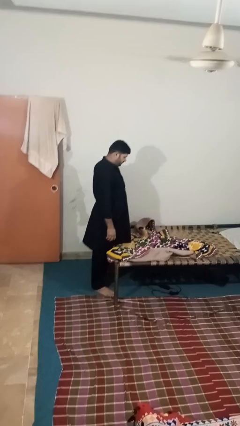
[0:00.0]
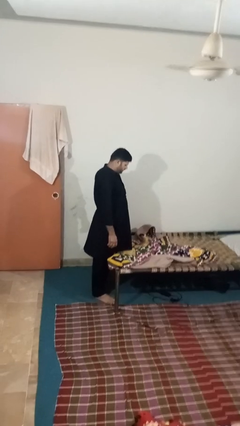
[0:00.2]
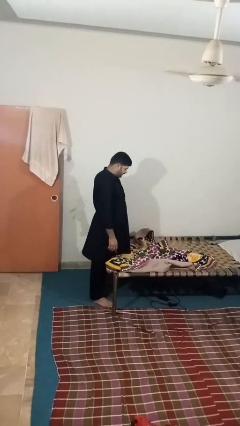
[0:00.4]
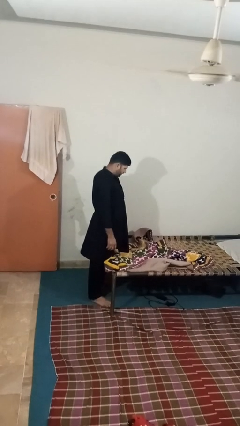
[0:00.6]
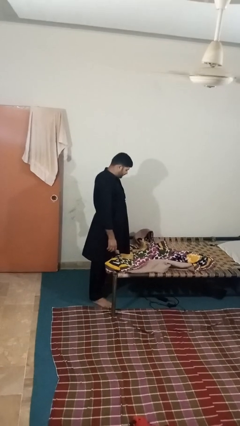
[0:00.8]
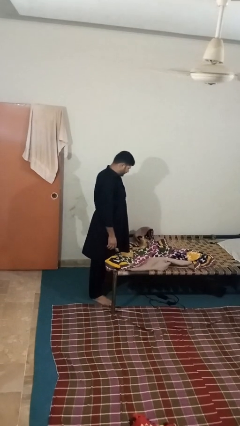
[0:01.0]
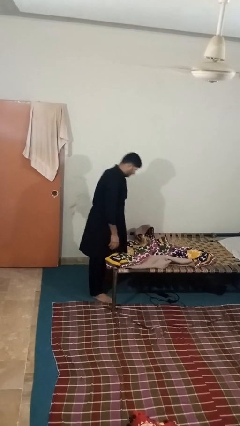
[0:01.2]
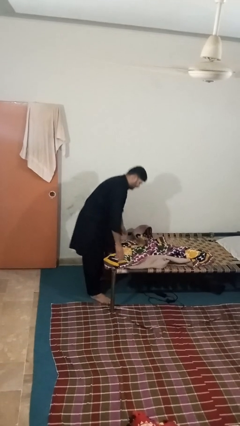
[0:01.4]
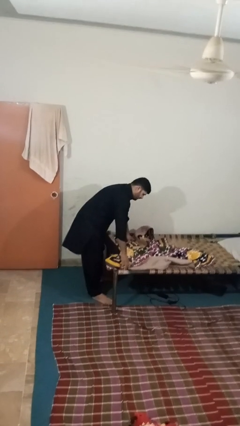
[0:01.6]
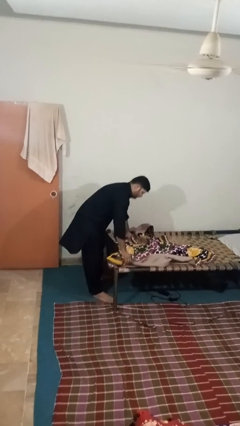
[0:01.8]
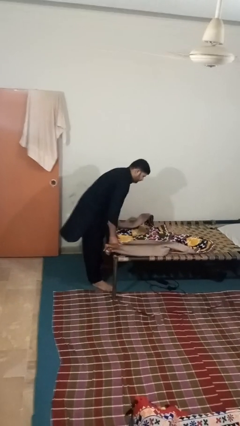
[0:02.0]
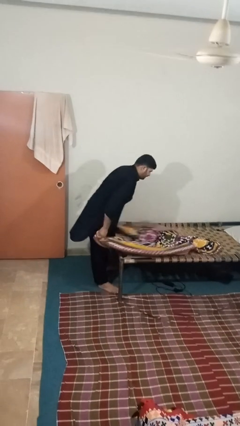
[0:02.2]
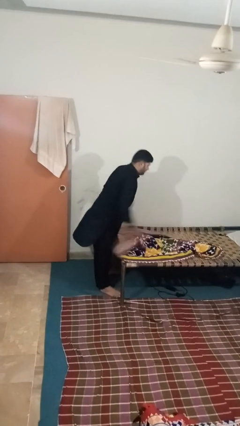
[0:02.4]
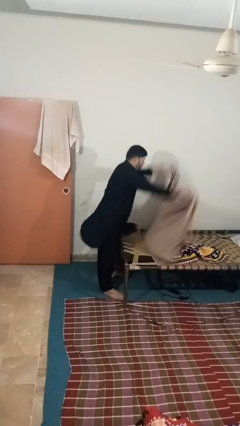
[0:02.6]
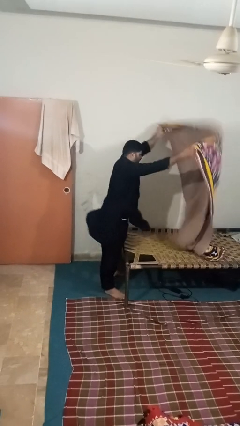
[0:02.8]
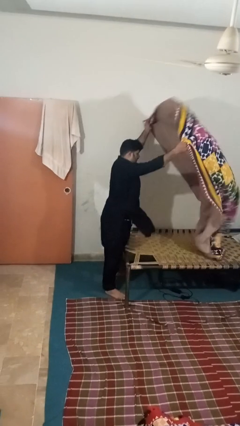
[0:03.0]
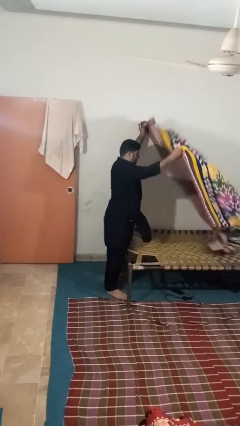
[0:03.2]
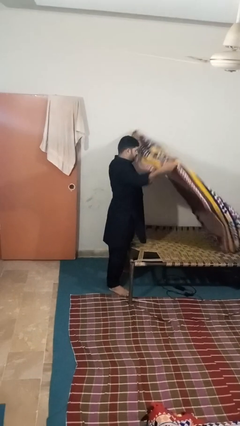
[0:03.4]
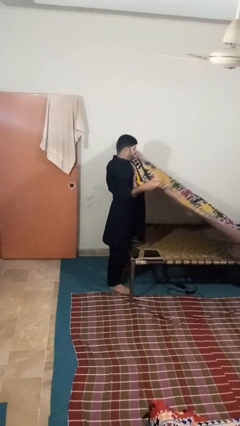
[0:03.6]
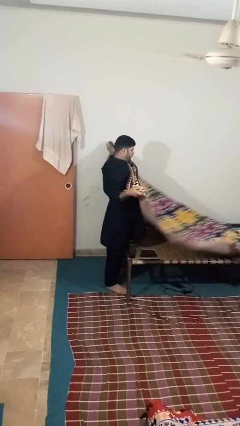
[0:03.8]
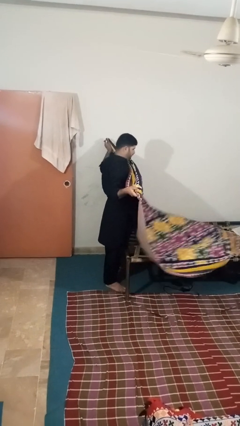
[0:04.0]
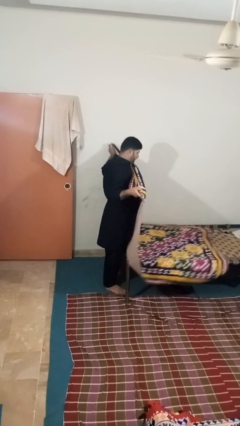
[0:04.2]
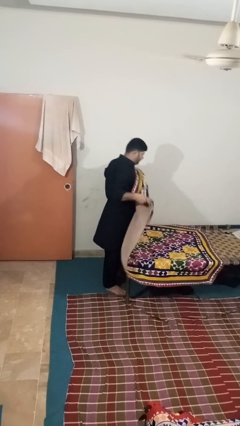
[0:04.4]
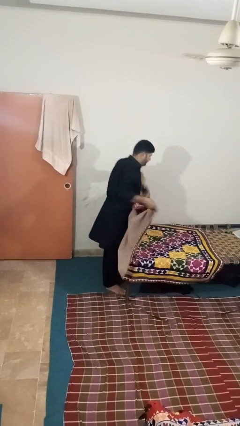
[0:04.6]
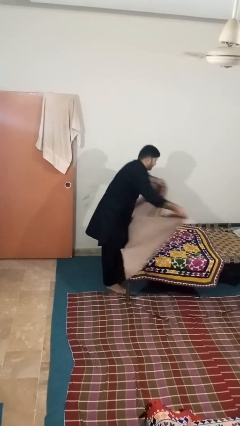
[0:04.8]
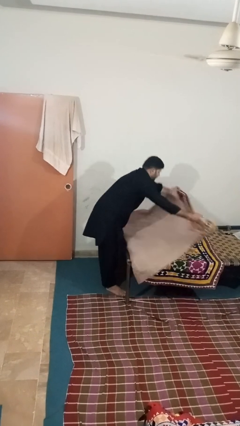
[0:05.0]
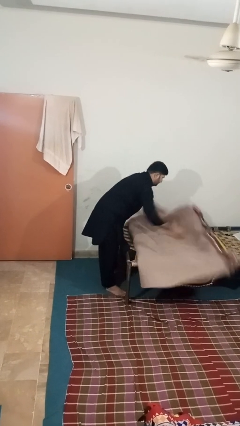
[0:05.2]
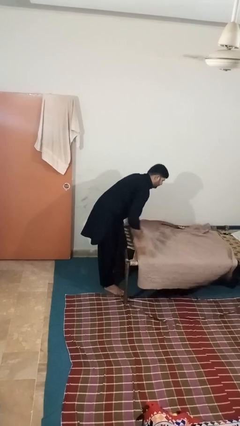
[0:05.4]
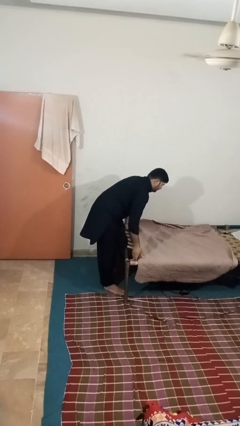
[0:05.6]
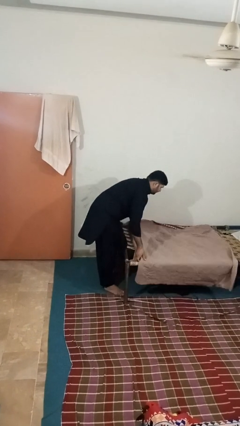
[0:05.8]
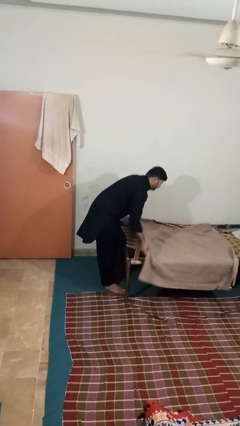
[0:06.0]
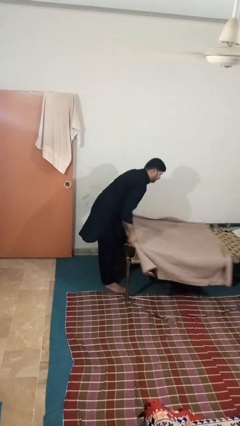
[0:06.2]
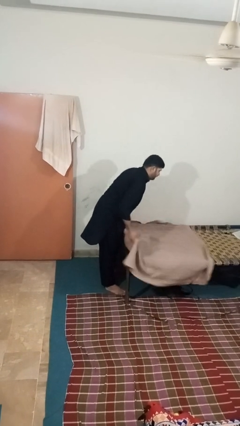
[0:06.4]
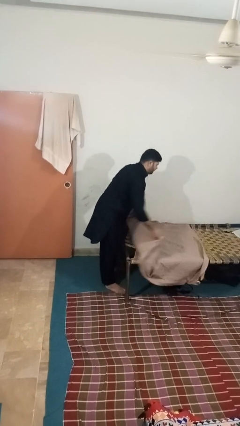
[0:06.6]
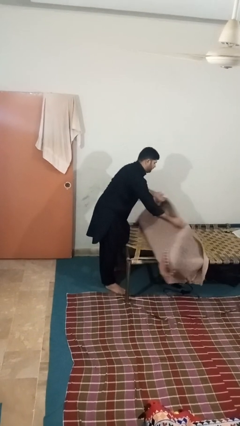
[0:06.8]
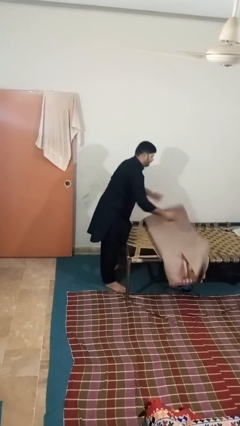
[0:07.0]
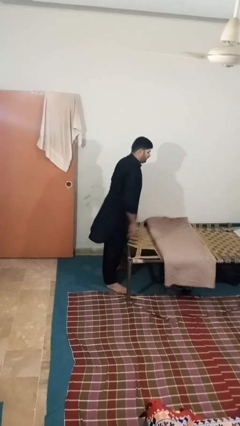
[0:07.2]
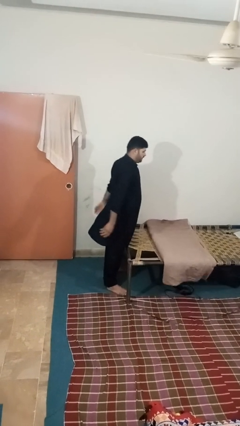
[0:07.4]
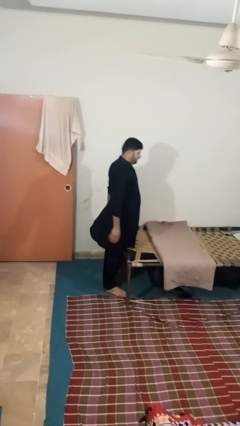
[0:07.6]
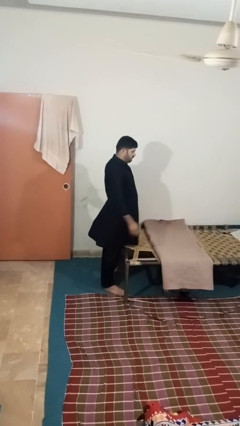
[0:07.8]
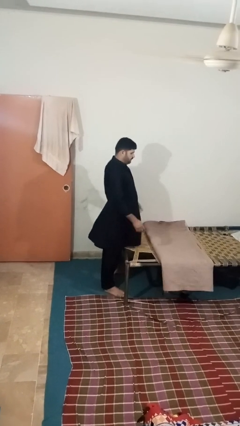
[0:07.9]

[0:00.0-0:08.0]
person folds blanket

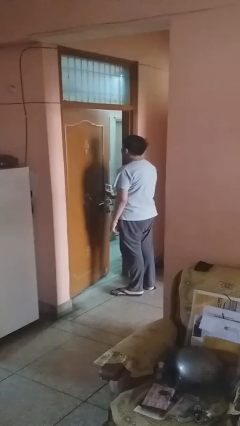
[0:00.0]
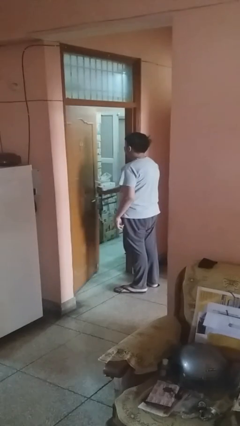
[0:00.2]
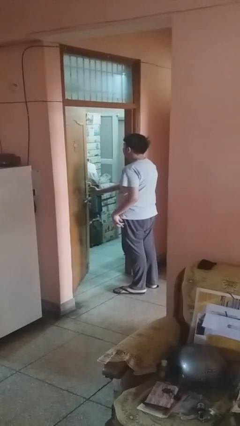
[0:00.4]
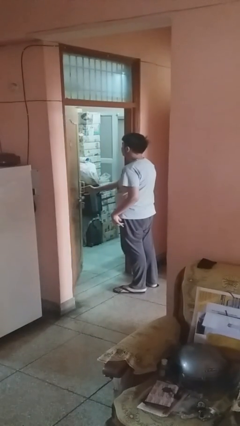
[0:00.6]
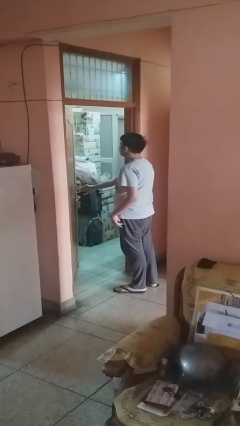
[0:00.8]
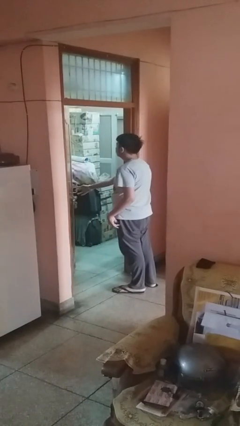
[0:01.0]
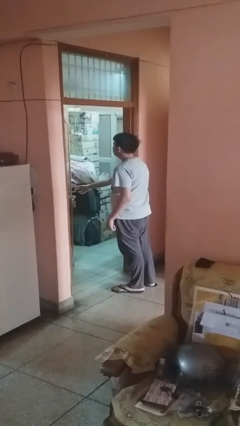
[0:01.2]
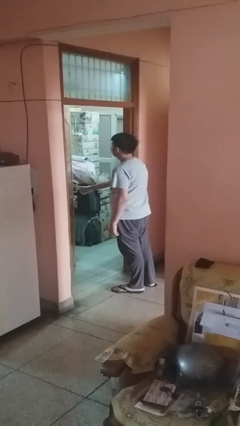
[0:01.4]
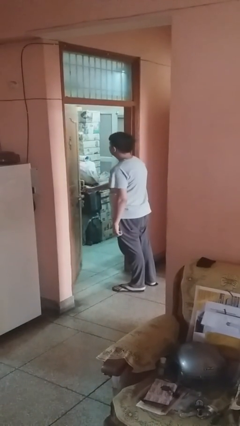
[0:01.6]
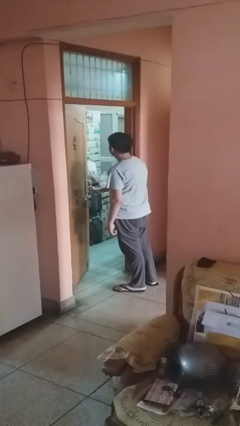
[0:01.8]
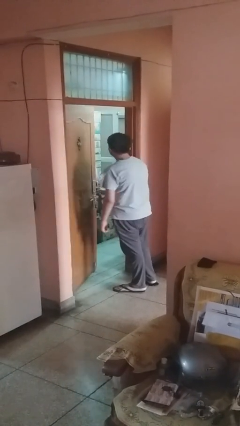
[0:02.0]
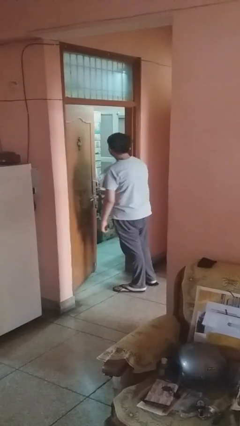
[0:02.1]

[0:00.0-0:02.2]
person opens facility door

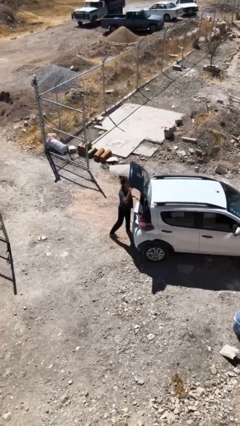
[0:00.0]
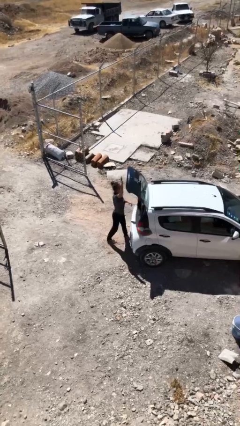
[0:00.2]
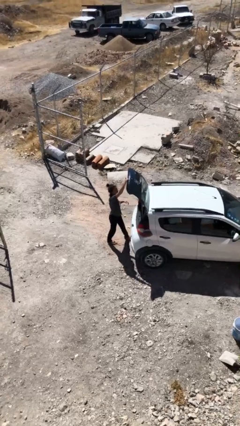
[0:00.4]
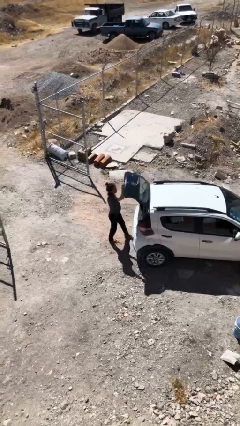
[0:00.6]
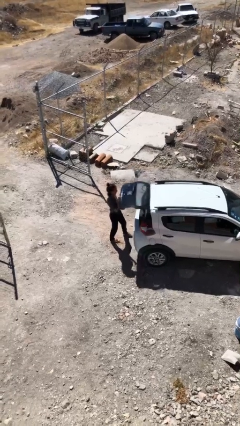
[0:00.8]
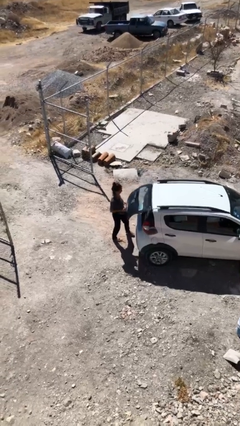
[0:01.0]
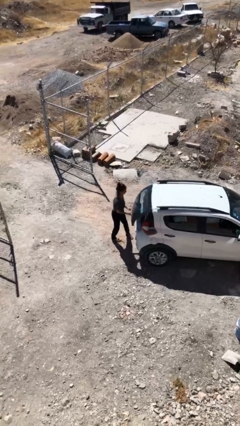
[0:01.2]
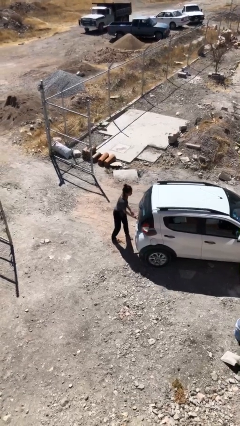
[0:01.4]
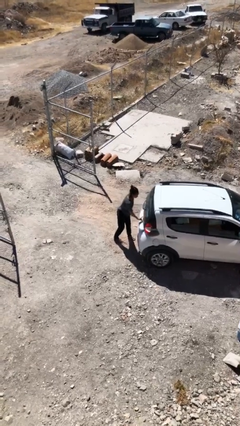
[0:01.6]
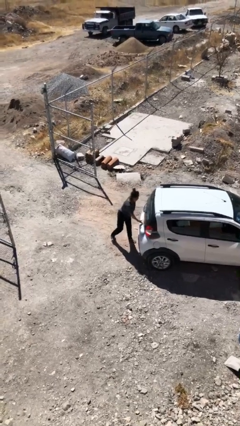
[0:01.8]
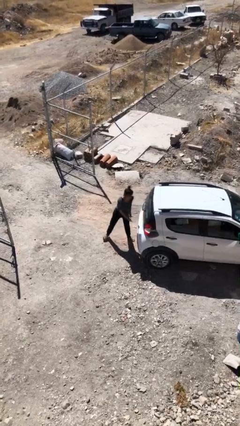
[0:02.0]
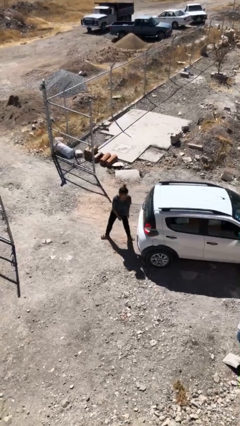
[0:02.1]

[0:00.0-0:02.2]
person closes car trunk

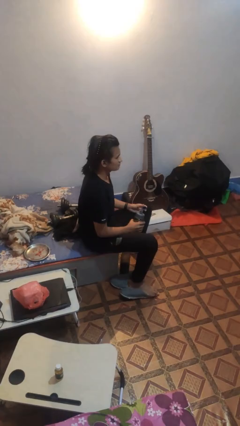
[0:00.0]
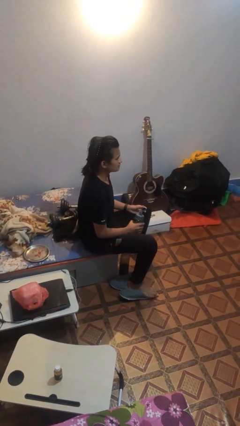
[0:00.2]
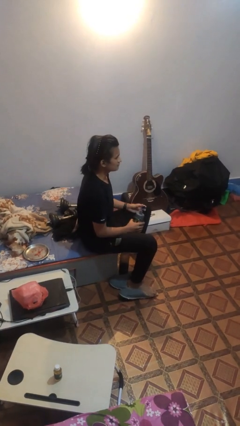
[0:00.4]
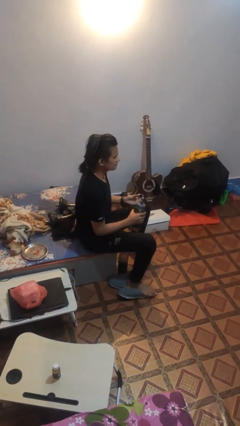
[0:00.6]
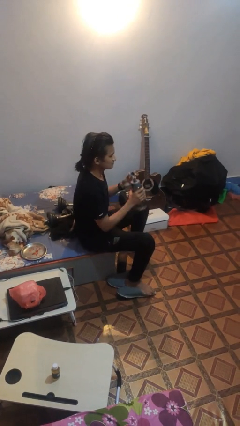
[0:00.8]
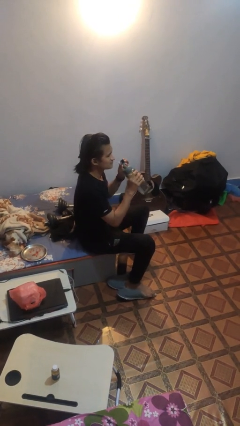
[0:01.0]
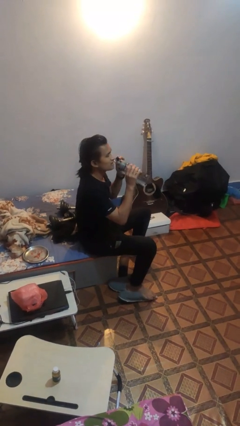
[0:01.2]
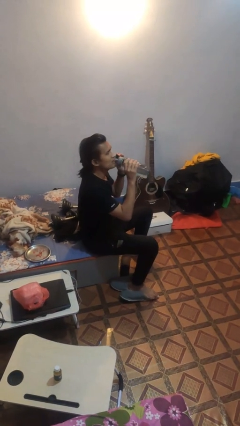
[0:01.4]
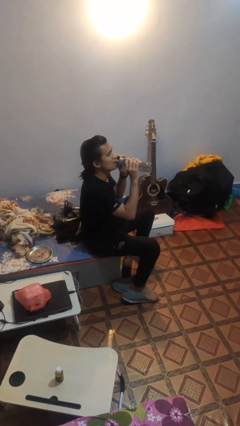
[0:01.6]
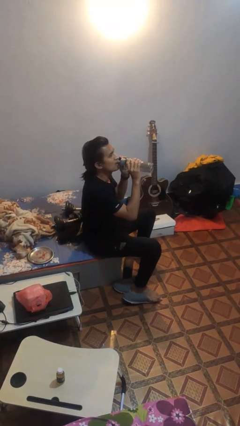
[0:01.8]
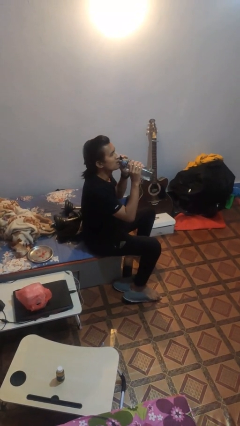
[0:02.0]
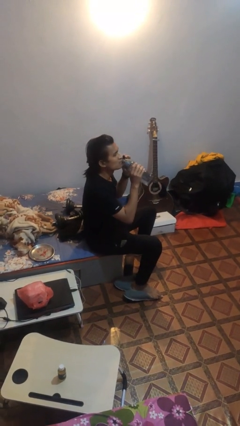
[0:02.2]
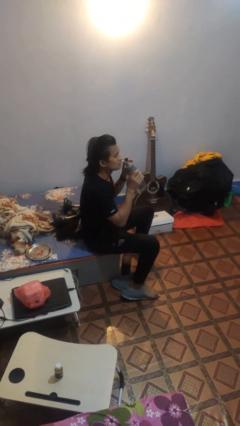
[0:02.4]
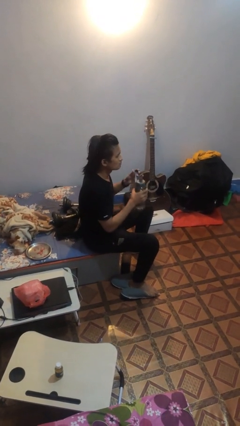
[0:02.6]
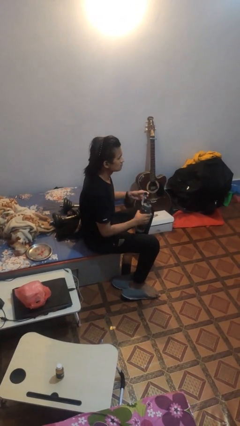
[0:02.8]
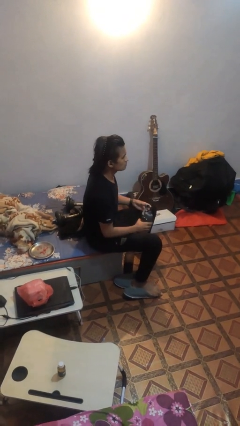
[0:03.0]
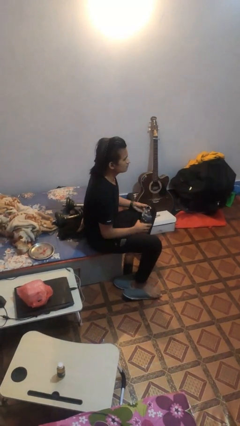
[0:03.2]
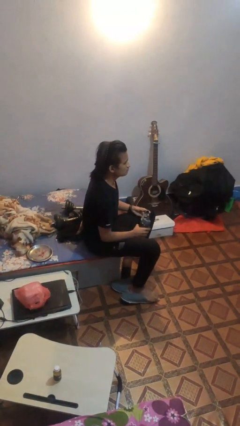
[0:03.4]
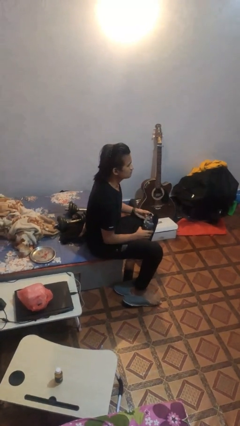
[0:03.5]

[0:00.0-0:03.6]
person drinks from bottle

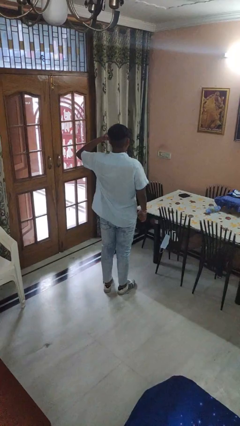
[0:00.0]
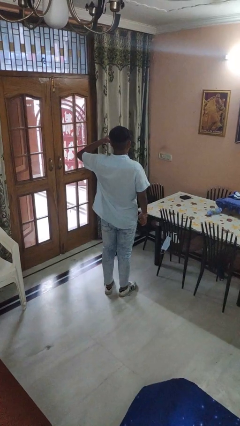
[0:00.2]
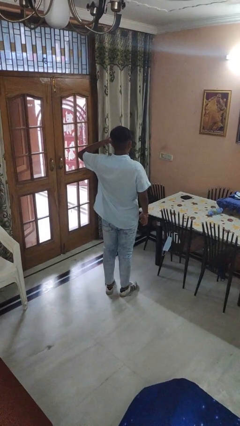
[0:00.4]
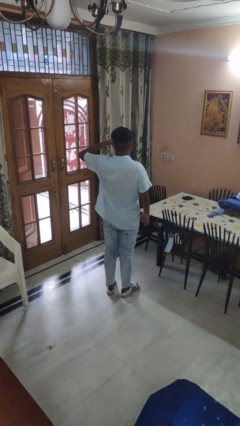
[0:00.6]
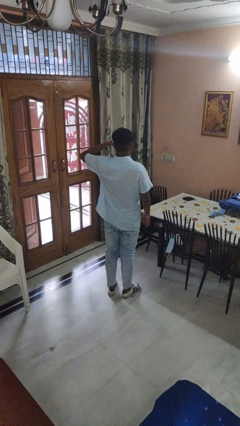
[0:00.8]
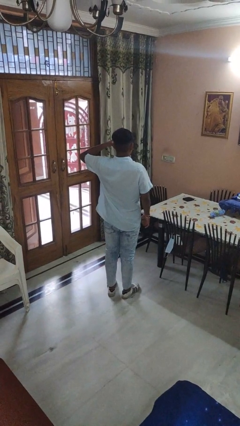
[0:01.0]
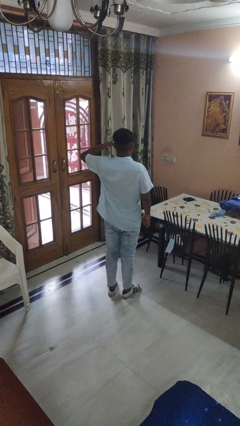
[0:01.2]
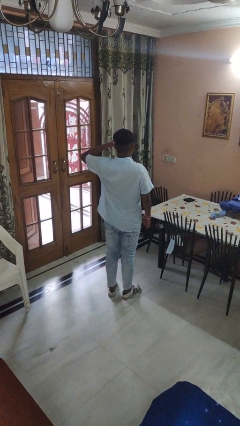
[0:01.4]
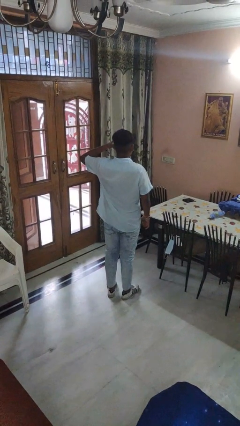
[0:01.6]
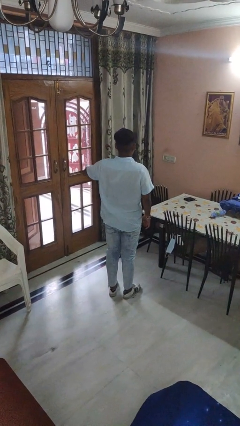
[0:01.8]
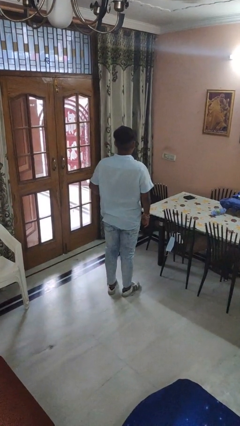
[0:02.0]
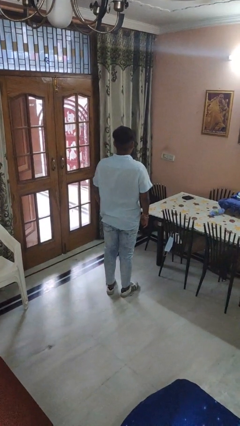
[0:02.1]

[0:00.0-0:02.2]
person gestures call me
